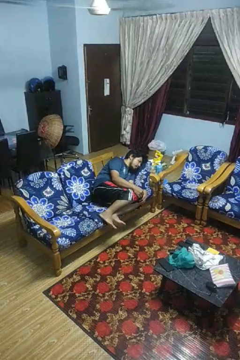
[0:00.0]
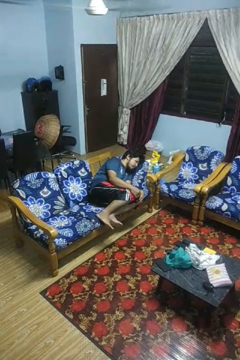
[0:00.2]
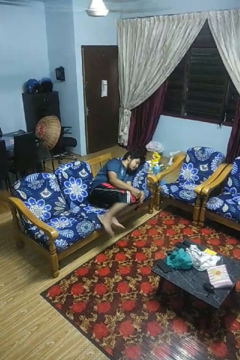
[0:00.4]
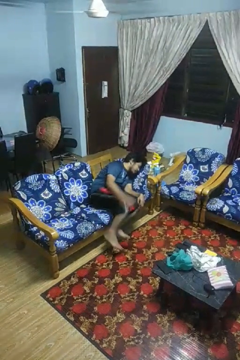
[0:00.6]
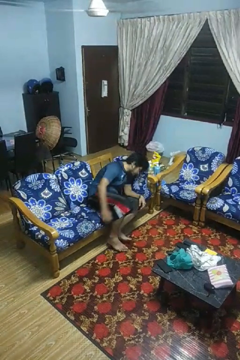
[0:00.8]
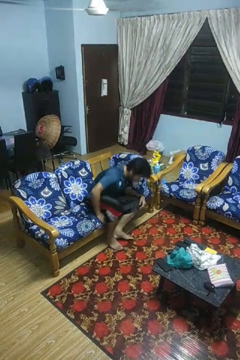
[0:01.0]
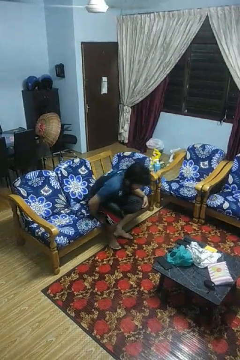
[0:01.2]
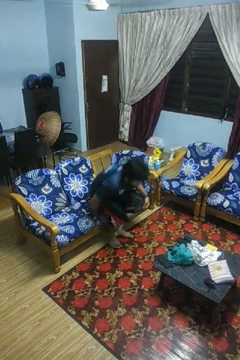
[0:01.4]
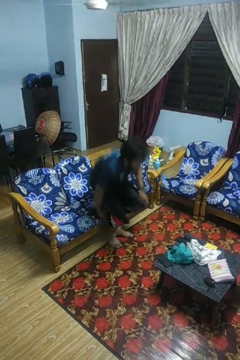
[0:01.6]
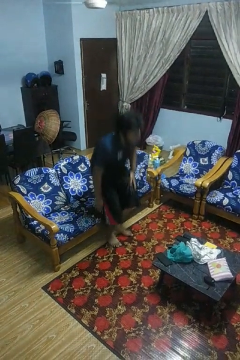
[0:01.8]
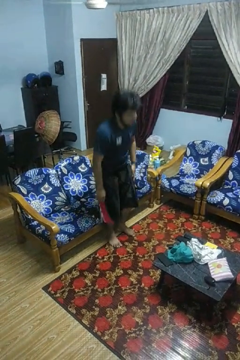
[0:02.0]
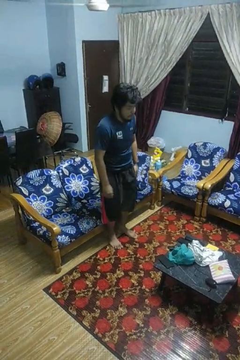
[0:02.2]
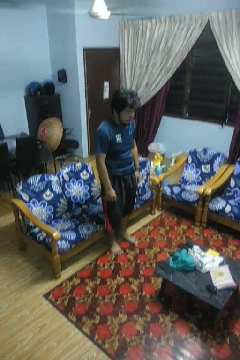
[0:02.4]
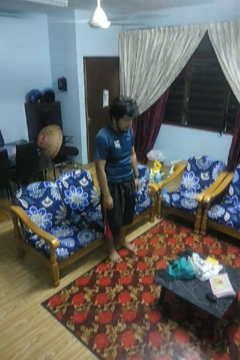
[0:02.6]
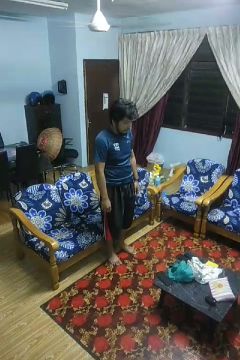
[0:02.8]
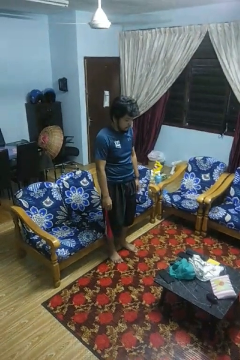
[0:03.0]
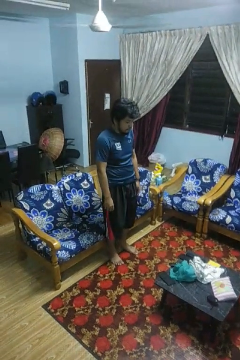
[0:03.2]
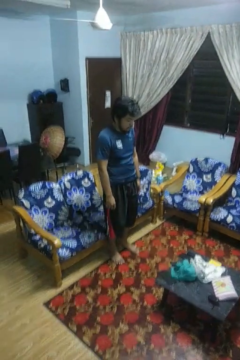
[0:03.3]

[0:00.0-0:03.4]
person stands up

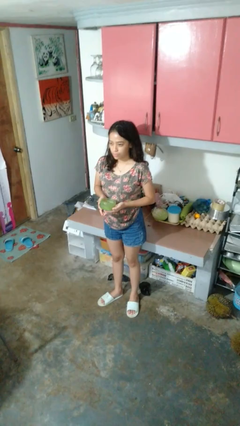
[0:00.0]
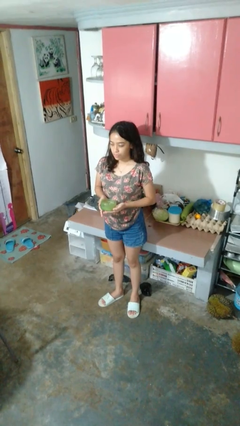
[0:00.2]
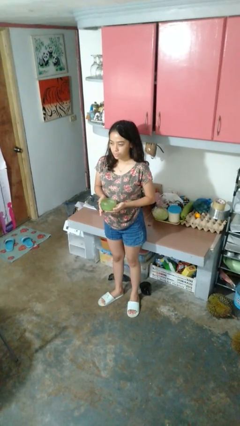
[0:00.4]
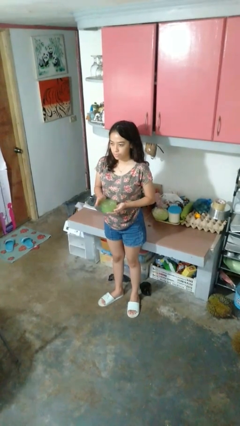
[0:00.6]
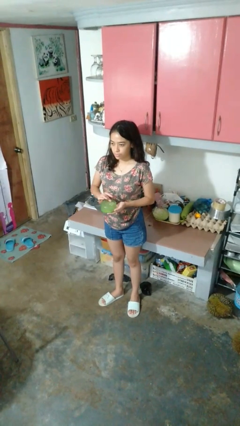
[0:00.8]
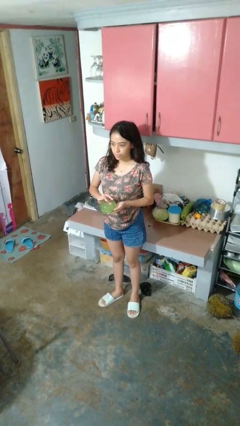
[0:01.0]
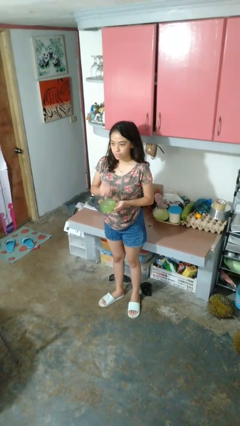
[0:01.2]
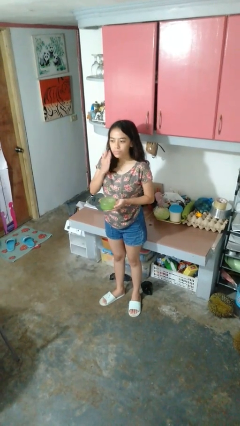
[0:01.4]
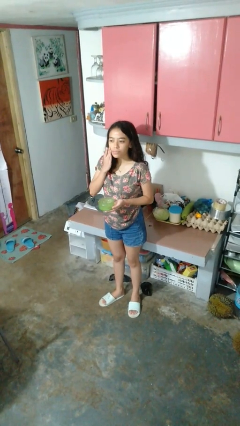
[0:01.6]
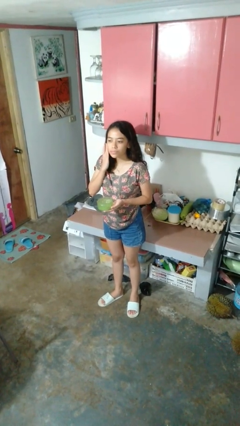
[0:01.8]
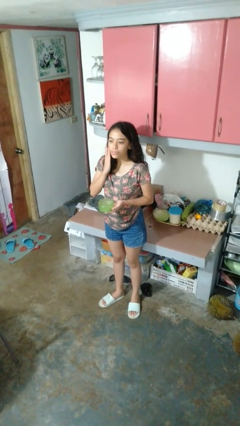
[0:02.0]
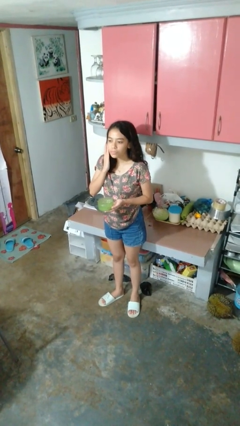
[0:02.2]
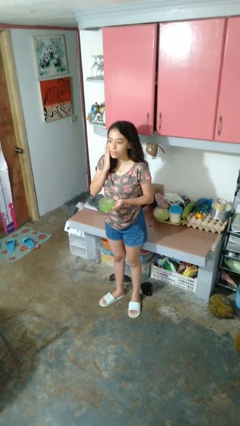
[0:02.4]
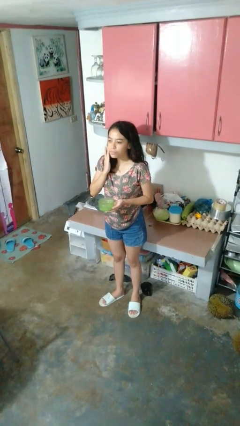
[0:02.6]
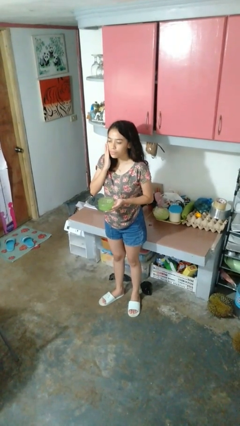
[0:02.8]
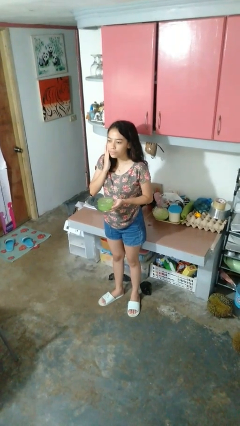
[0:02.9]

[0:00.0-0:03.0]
person applies facial moisturizer

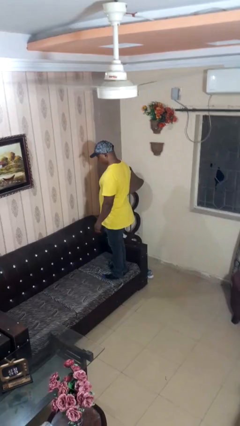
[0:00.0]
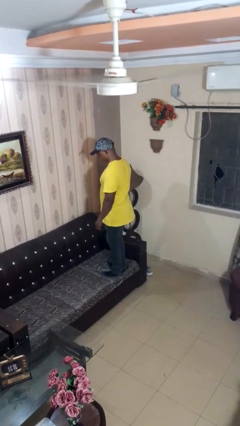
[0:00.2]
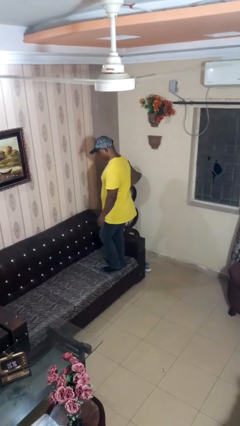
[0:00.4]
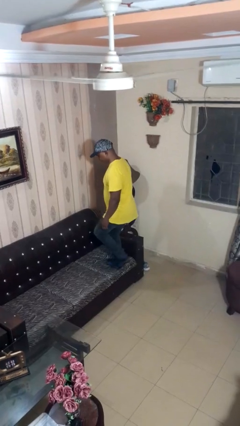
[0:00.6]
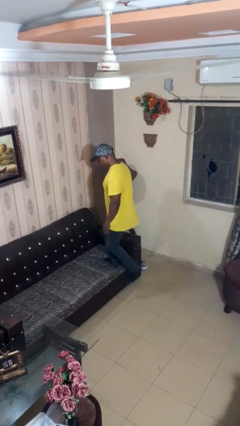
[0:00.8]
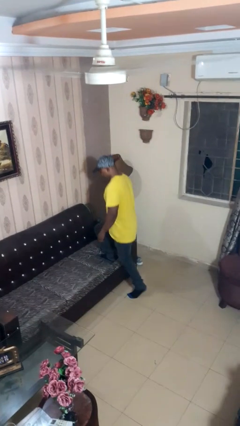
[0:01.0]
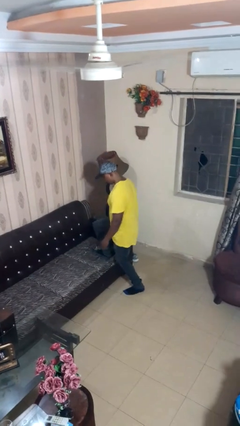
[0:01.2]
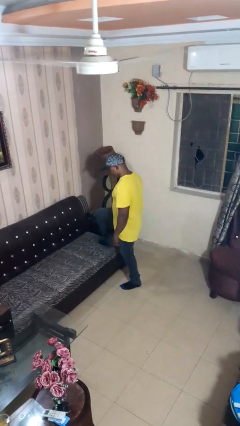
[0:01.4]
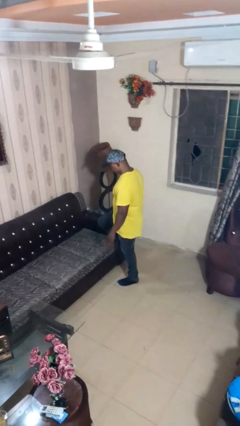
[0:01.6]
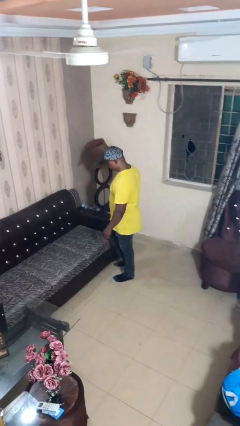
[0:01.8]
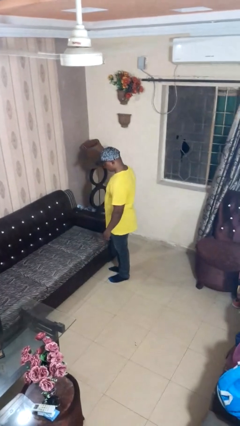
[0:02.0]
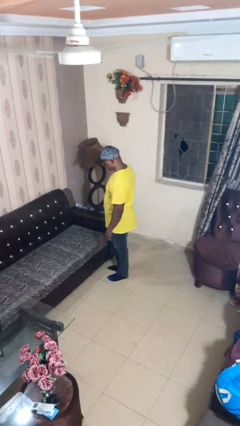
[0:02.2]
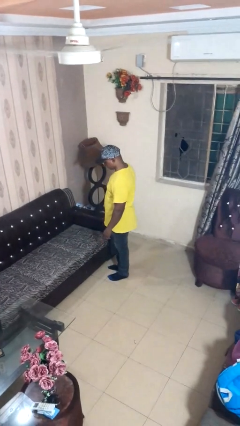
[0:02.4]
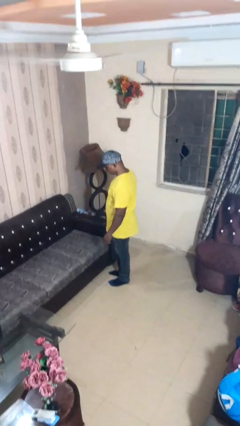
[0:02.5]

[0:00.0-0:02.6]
person climbs off couch

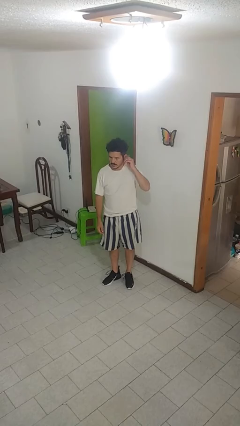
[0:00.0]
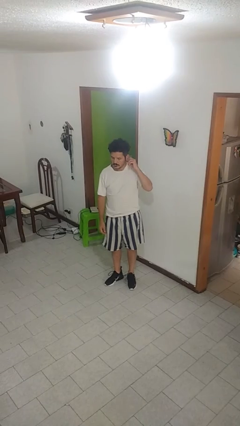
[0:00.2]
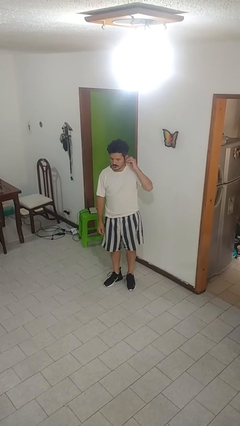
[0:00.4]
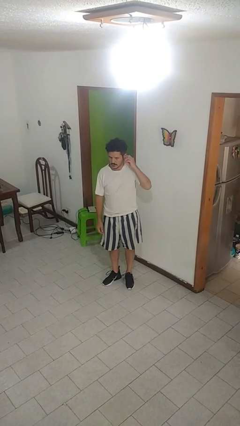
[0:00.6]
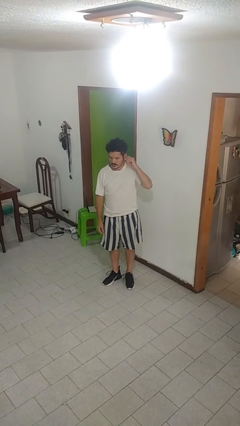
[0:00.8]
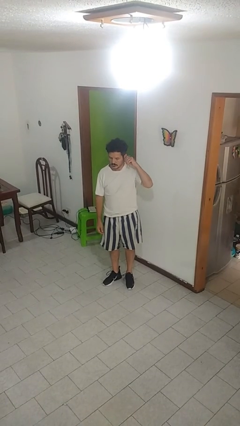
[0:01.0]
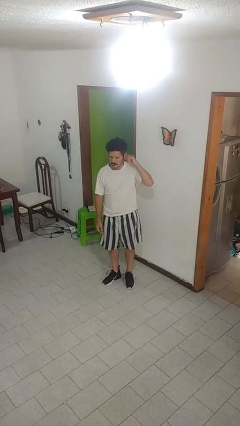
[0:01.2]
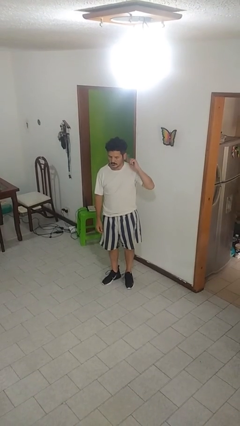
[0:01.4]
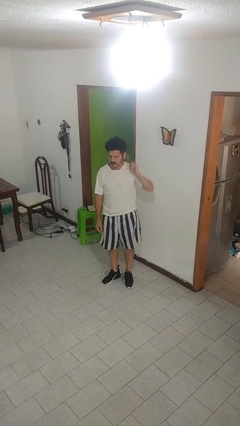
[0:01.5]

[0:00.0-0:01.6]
person touches earlobe

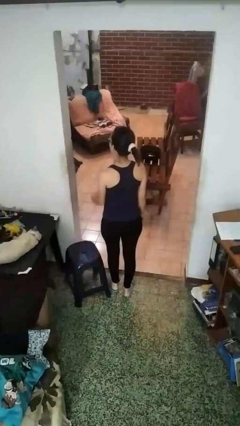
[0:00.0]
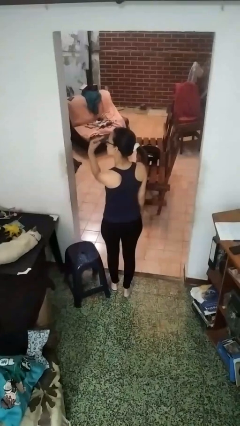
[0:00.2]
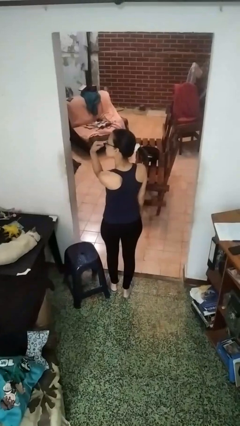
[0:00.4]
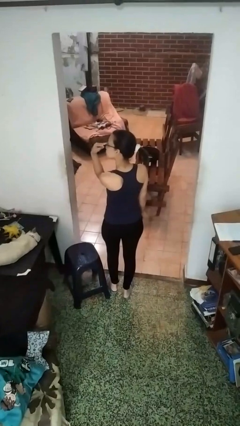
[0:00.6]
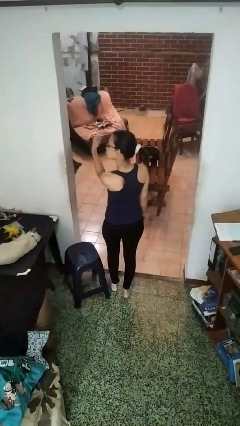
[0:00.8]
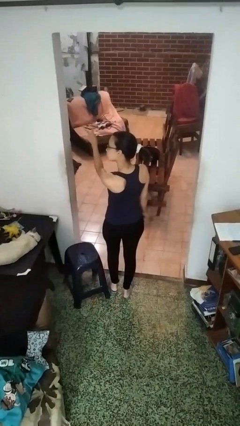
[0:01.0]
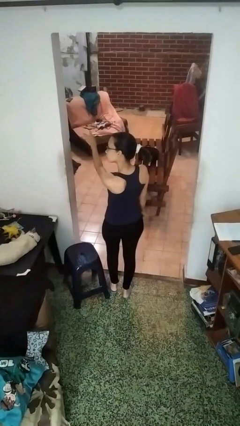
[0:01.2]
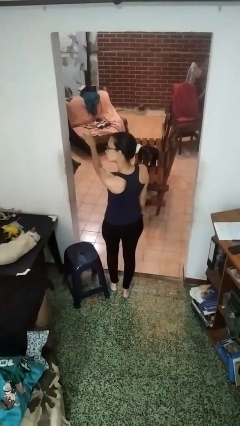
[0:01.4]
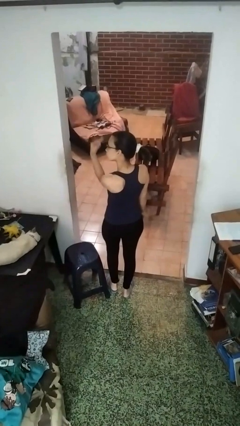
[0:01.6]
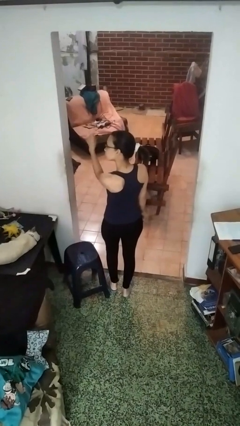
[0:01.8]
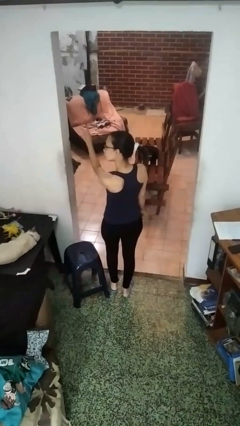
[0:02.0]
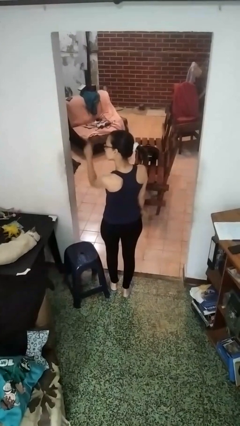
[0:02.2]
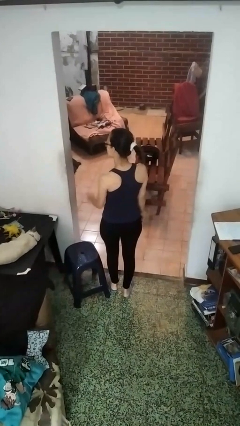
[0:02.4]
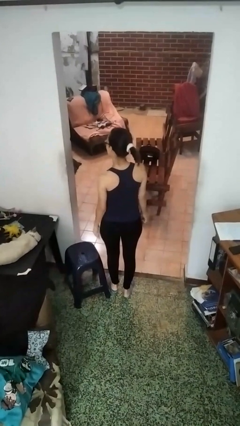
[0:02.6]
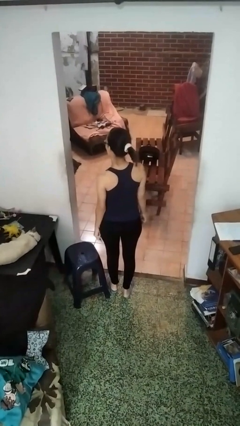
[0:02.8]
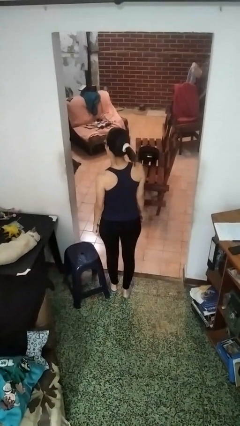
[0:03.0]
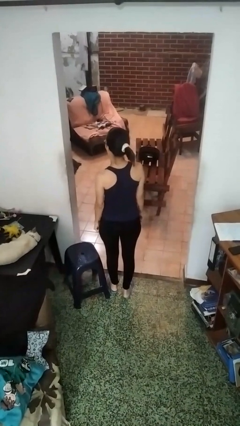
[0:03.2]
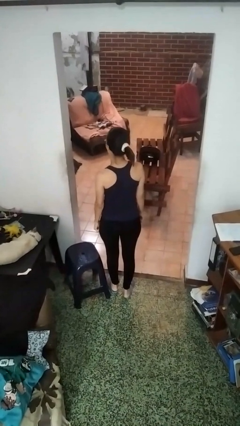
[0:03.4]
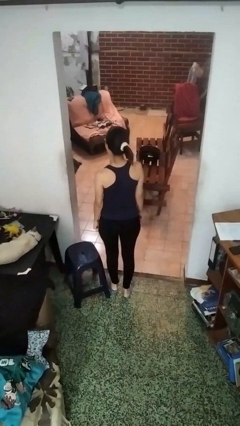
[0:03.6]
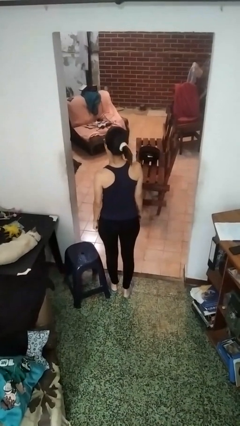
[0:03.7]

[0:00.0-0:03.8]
person gestures watch closely

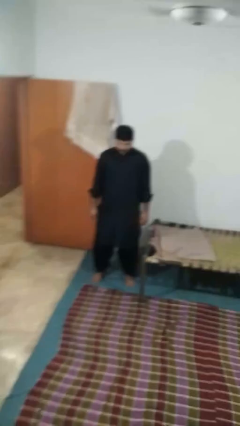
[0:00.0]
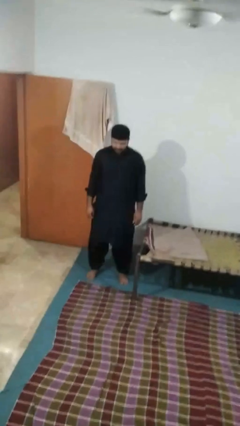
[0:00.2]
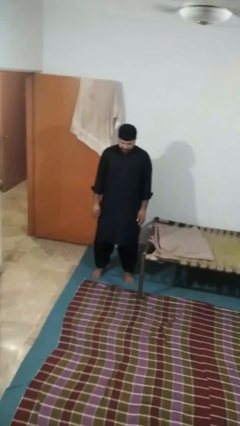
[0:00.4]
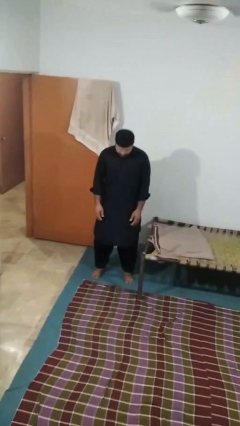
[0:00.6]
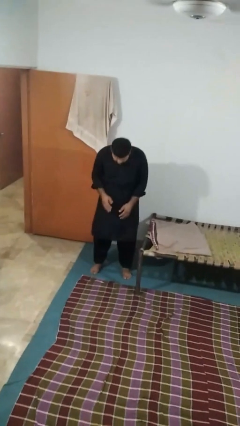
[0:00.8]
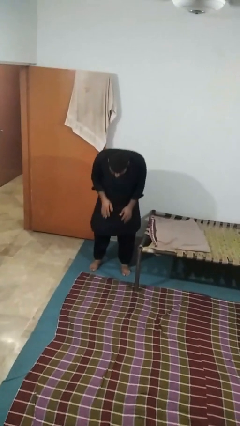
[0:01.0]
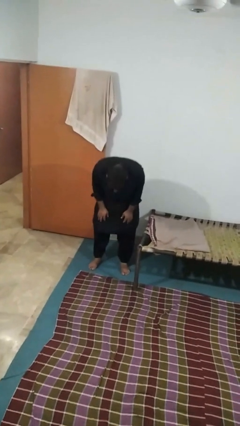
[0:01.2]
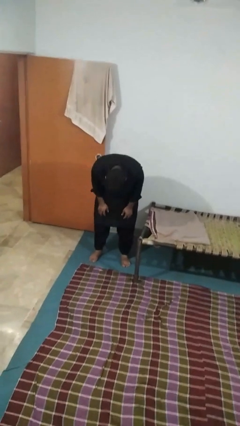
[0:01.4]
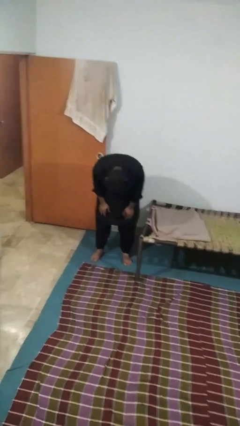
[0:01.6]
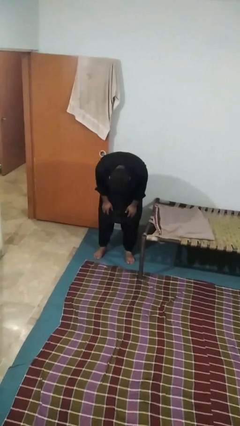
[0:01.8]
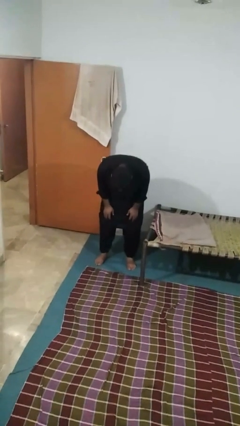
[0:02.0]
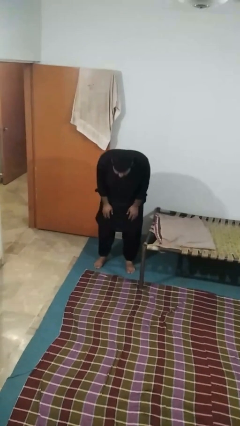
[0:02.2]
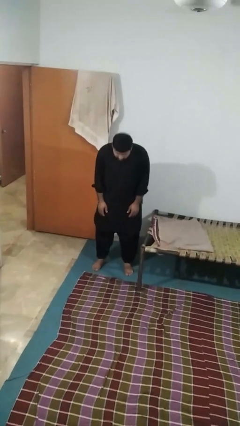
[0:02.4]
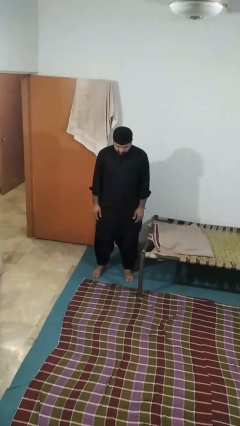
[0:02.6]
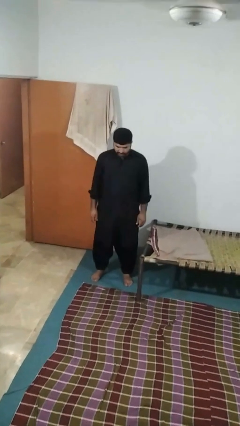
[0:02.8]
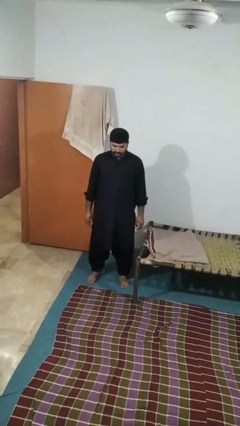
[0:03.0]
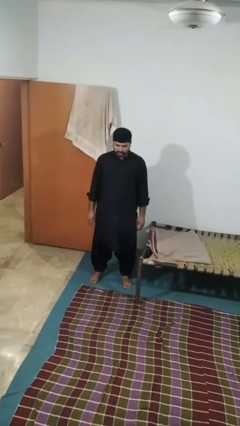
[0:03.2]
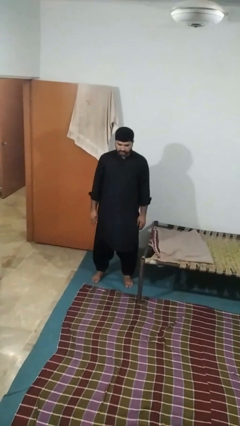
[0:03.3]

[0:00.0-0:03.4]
person bows
